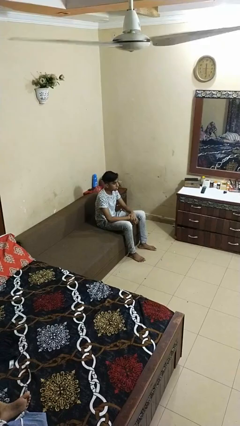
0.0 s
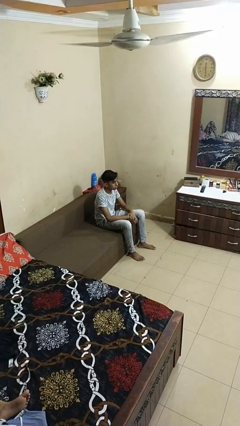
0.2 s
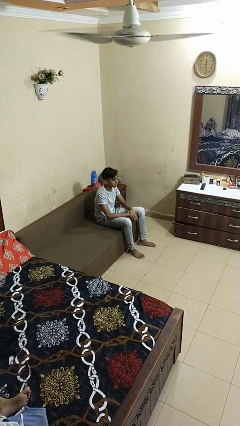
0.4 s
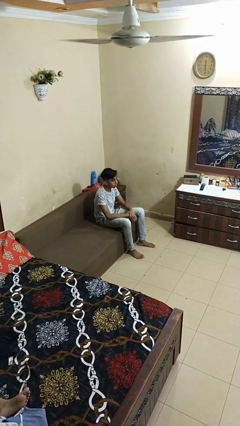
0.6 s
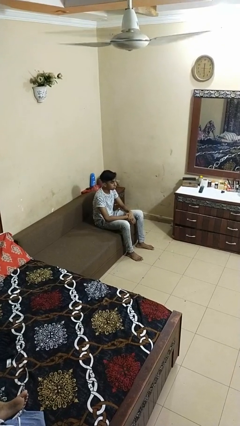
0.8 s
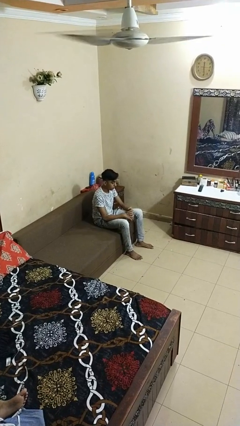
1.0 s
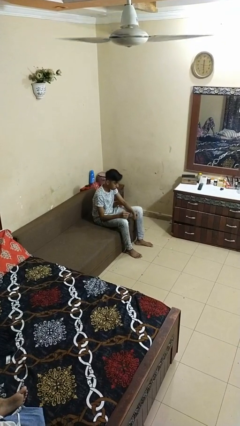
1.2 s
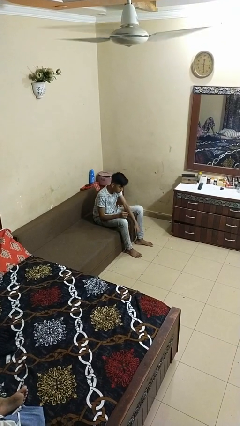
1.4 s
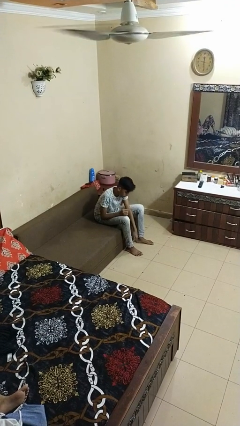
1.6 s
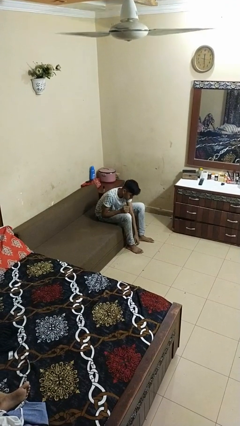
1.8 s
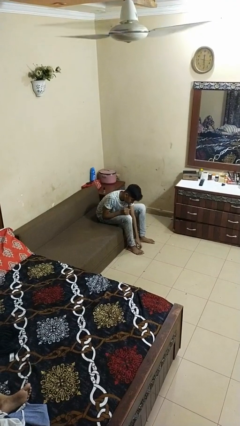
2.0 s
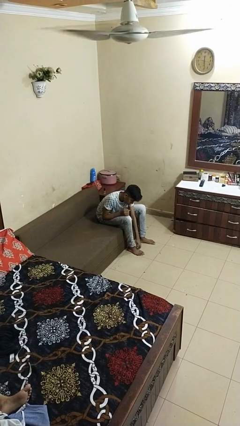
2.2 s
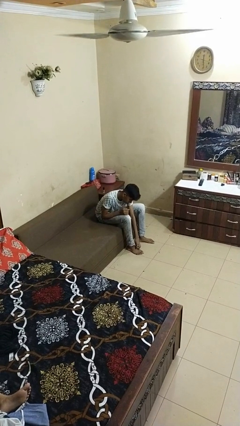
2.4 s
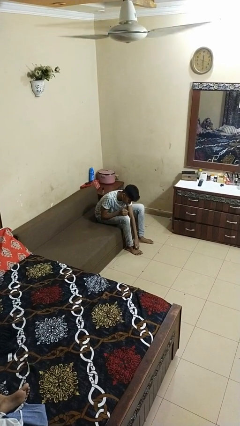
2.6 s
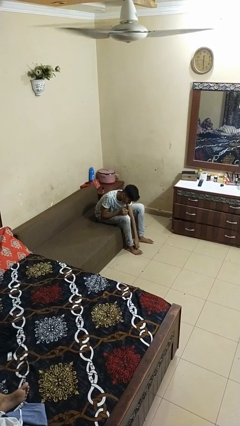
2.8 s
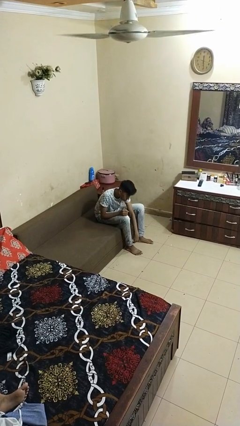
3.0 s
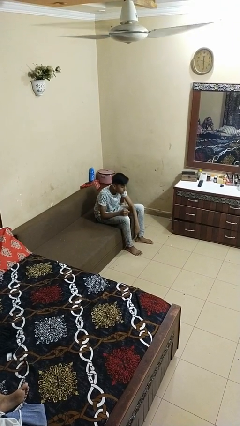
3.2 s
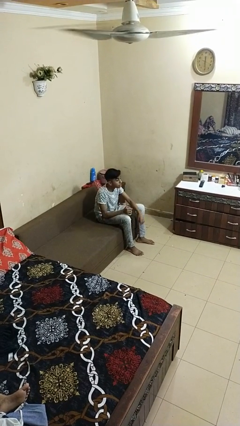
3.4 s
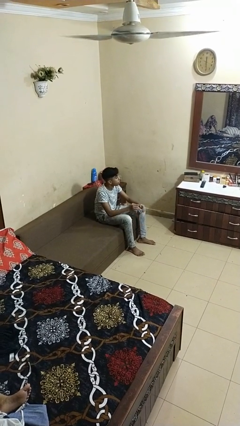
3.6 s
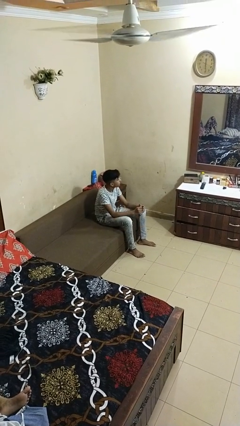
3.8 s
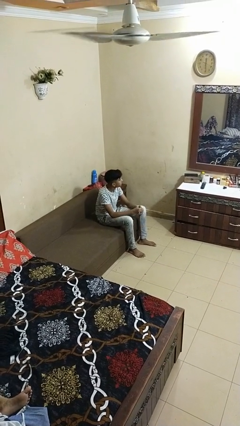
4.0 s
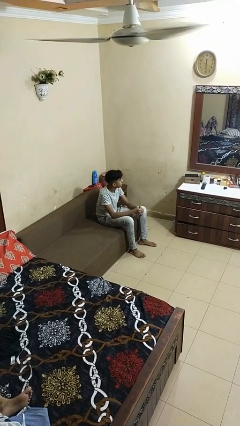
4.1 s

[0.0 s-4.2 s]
person rubs foot

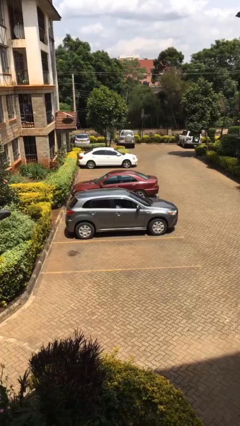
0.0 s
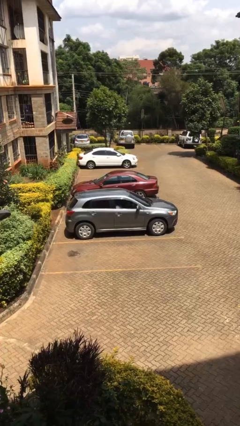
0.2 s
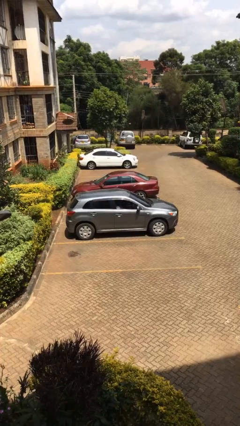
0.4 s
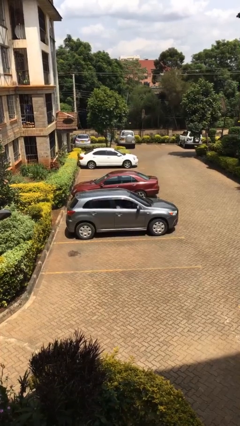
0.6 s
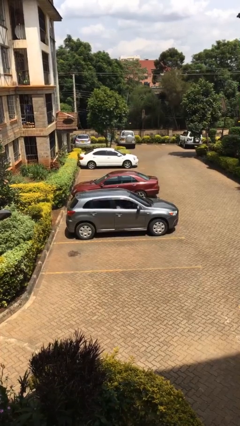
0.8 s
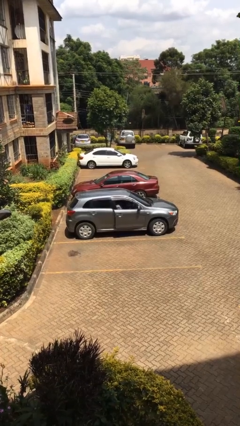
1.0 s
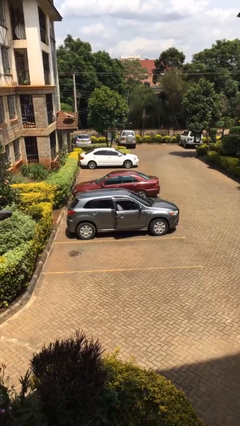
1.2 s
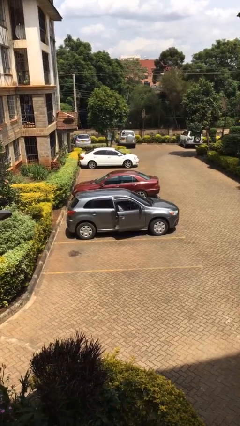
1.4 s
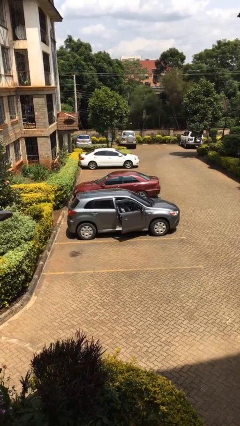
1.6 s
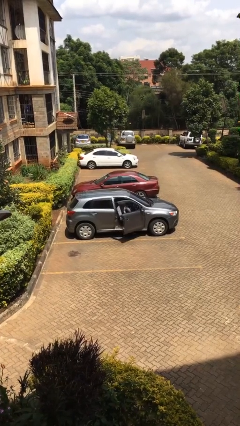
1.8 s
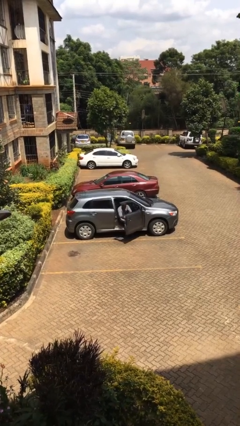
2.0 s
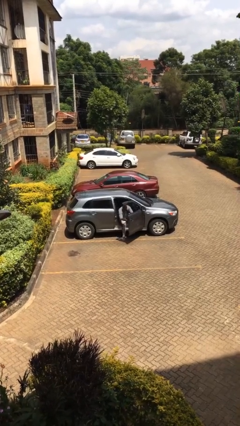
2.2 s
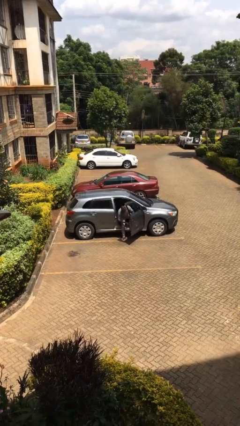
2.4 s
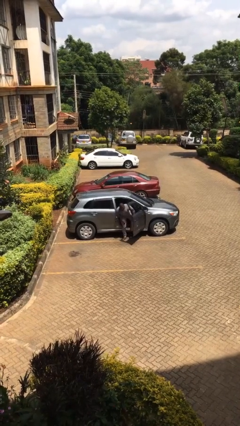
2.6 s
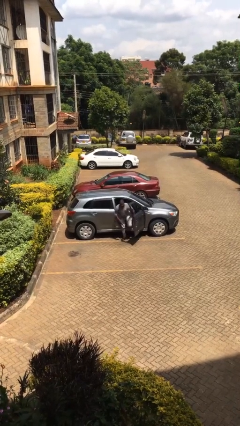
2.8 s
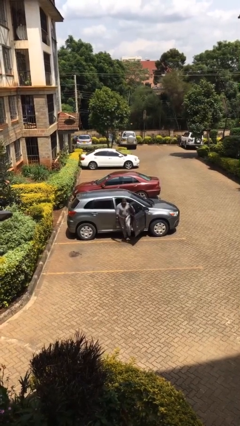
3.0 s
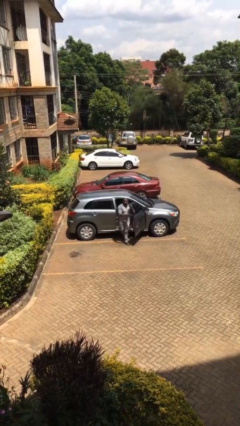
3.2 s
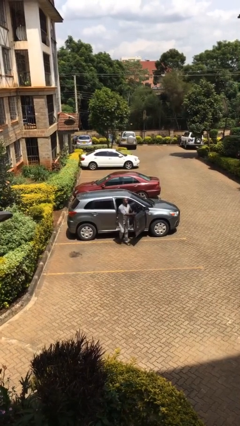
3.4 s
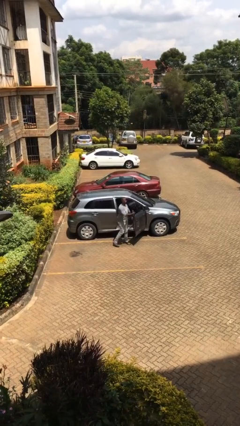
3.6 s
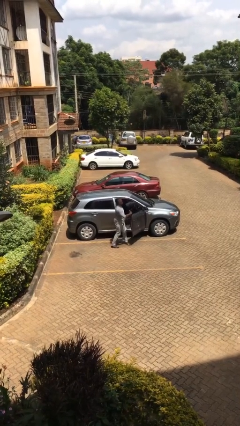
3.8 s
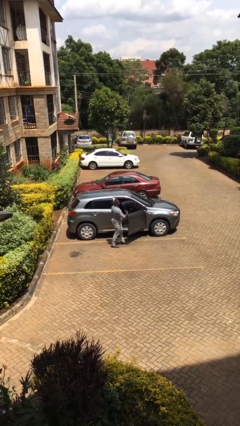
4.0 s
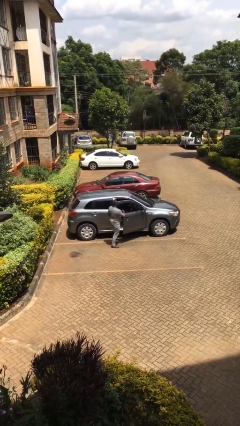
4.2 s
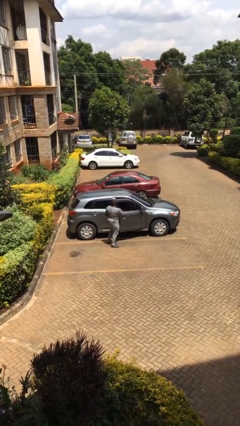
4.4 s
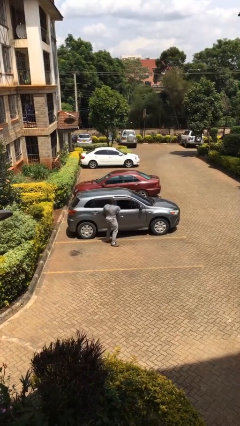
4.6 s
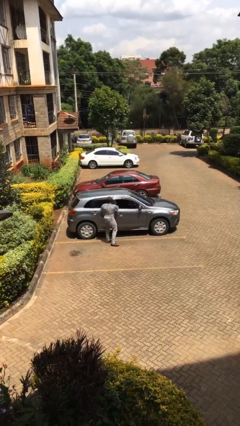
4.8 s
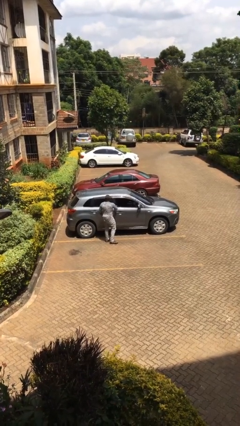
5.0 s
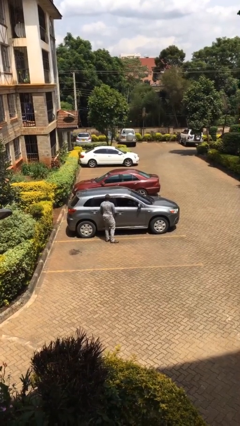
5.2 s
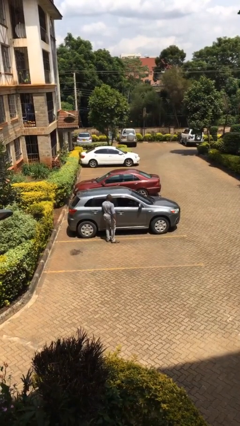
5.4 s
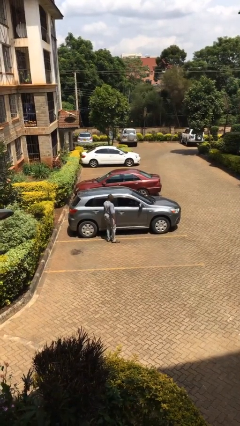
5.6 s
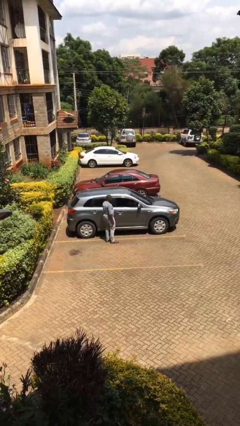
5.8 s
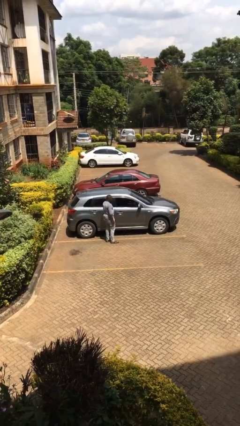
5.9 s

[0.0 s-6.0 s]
car drops off person

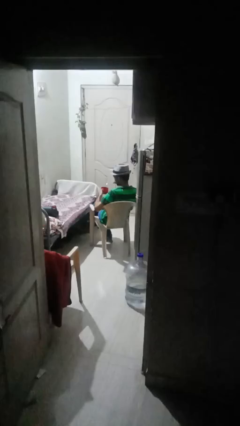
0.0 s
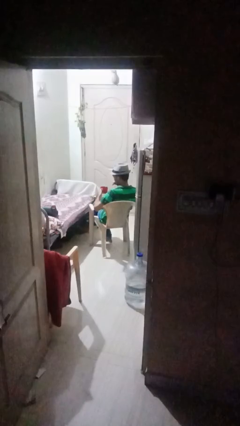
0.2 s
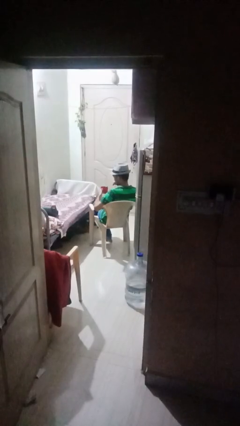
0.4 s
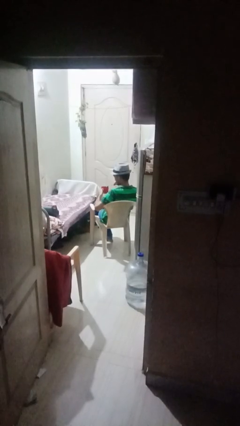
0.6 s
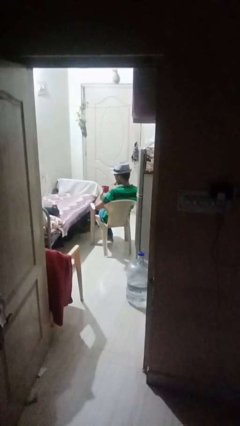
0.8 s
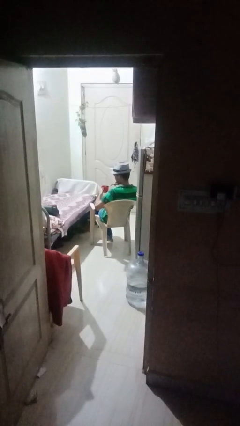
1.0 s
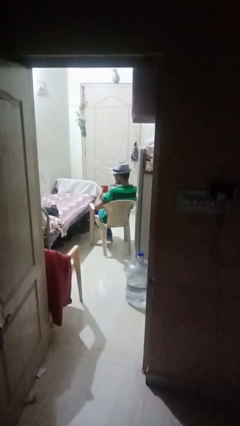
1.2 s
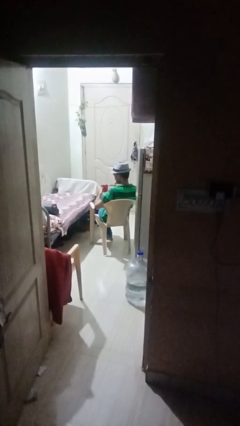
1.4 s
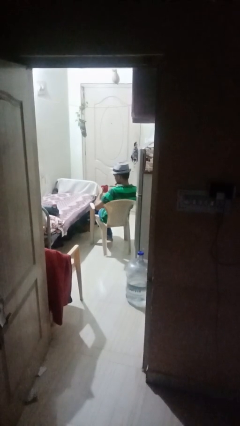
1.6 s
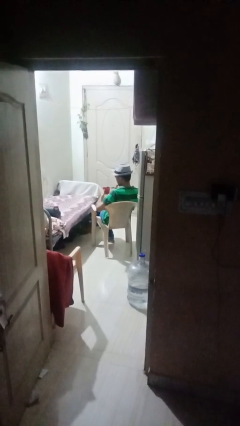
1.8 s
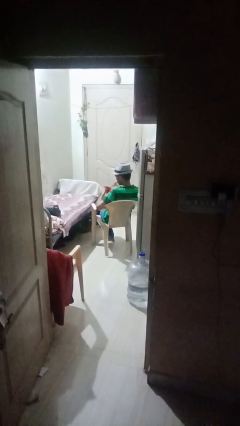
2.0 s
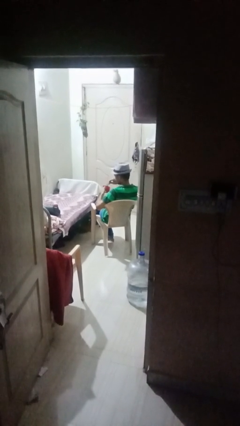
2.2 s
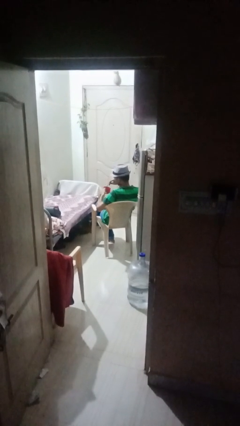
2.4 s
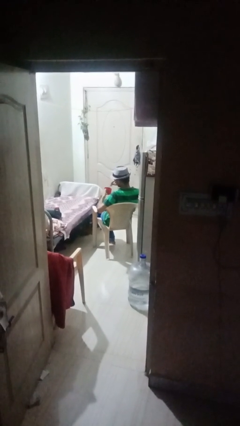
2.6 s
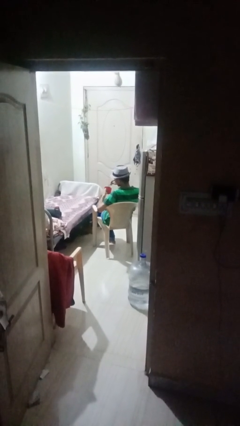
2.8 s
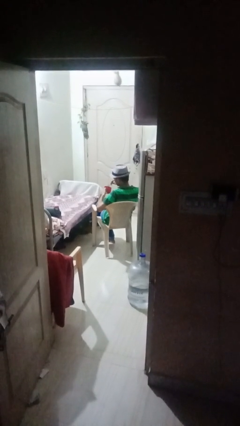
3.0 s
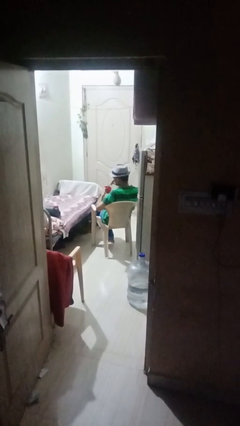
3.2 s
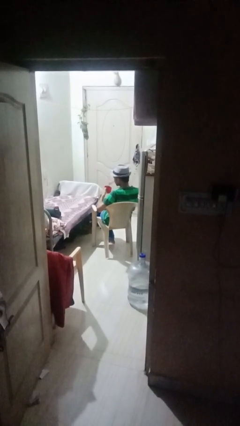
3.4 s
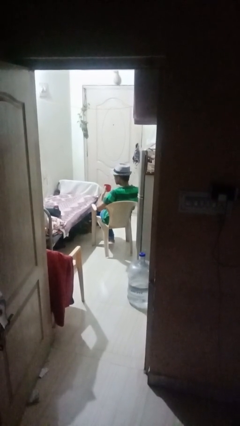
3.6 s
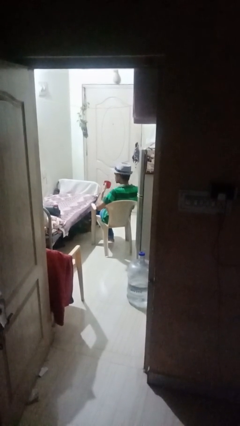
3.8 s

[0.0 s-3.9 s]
person stirs mug

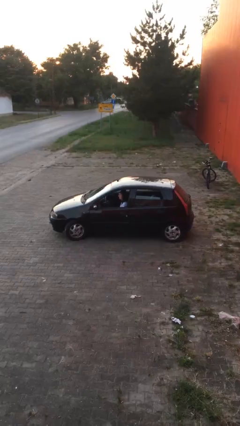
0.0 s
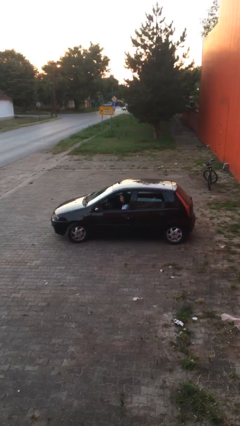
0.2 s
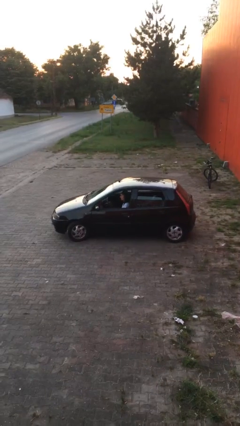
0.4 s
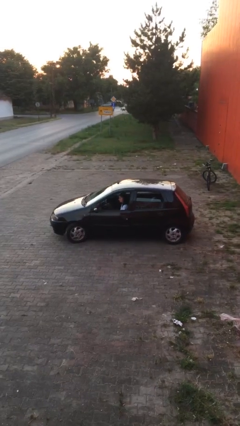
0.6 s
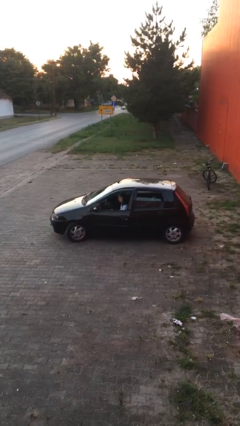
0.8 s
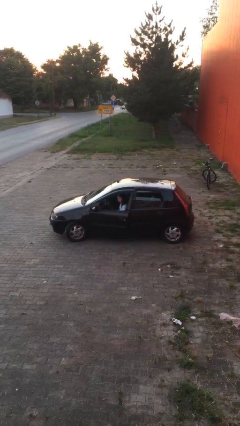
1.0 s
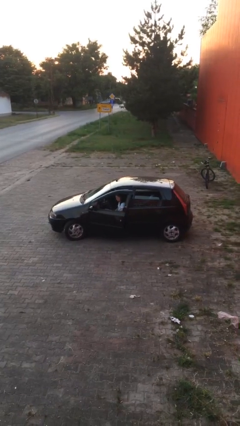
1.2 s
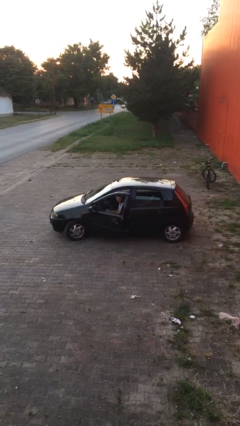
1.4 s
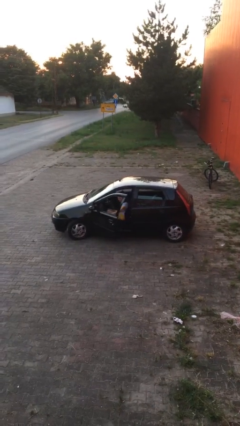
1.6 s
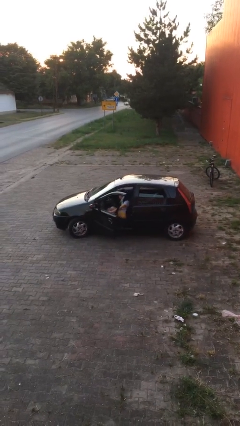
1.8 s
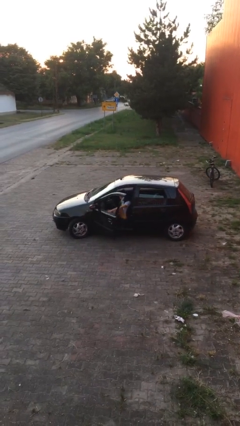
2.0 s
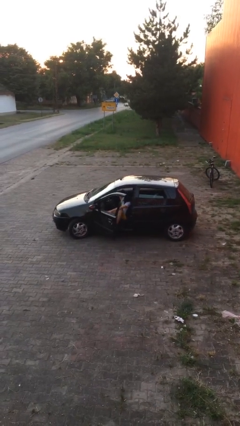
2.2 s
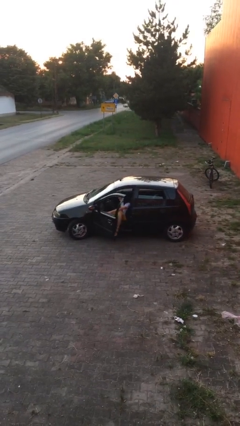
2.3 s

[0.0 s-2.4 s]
person opens car door

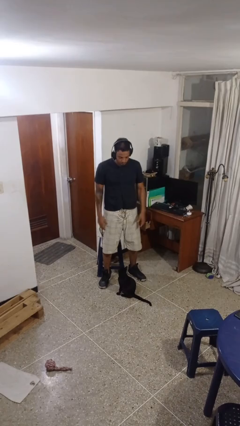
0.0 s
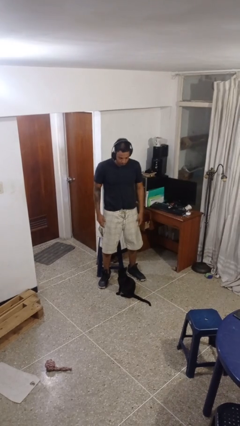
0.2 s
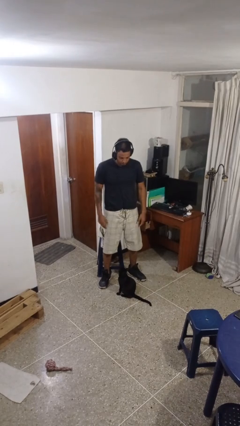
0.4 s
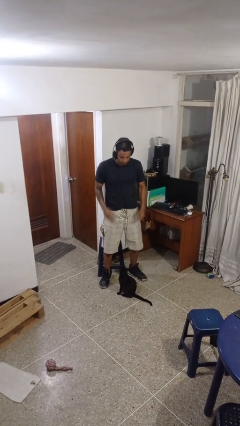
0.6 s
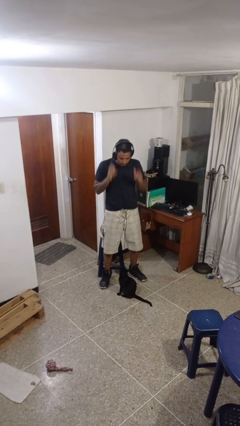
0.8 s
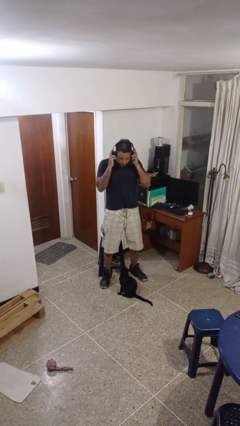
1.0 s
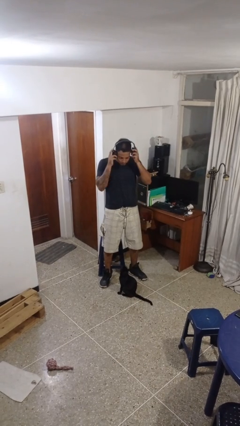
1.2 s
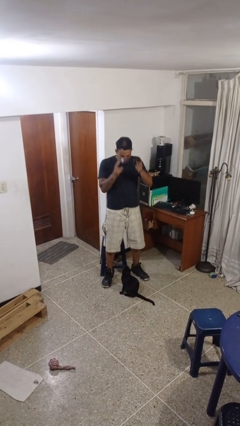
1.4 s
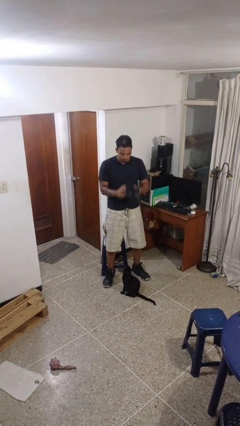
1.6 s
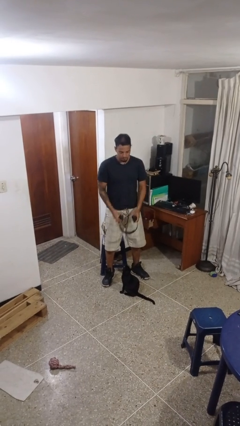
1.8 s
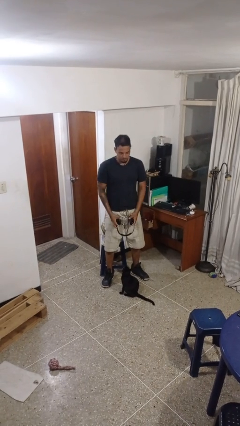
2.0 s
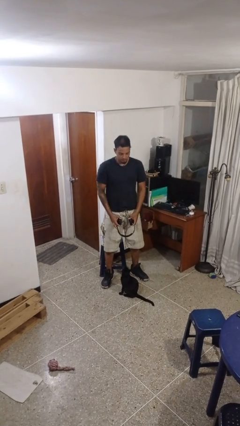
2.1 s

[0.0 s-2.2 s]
person takes off headphones
